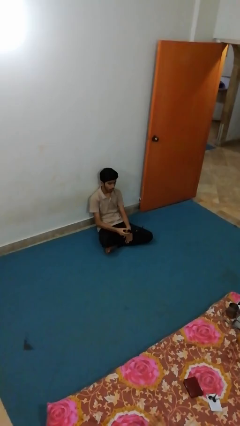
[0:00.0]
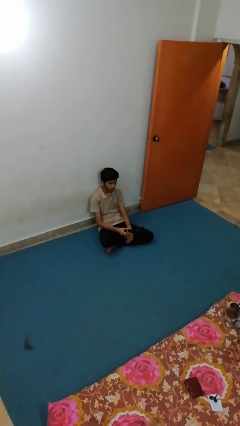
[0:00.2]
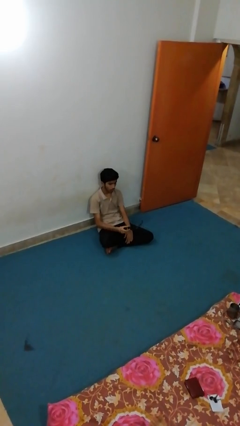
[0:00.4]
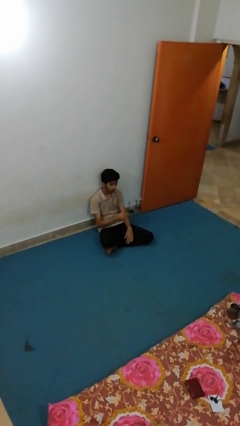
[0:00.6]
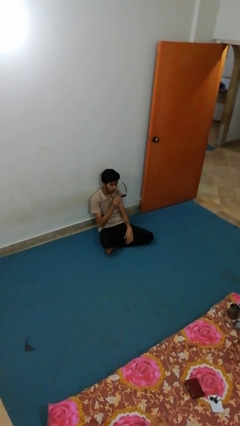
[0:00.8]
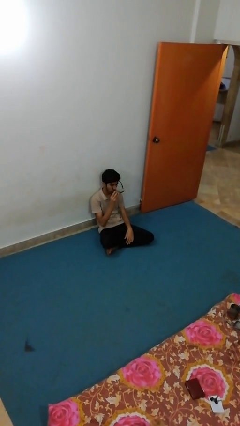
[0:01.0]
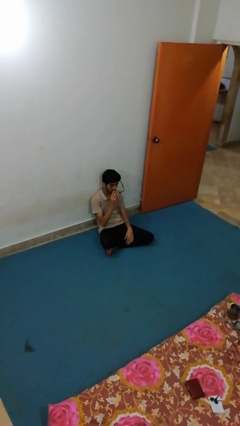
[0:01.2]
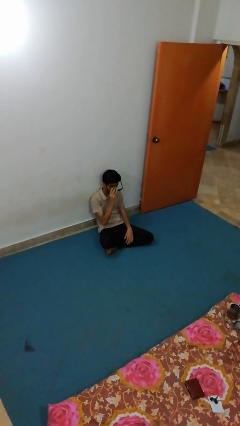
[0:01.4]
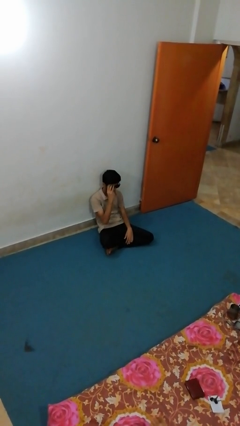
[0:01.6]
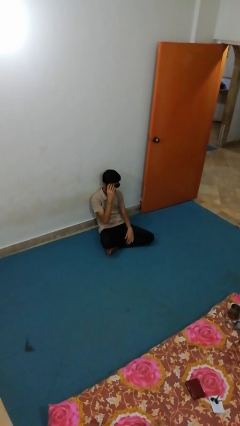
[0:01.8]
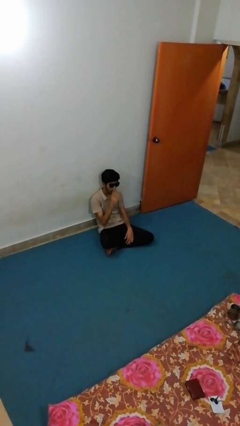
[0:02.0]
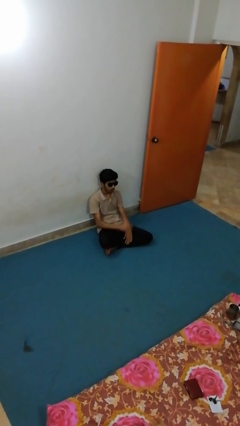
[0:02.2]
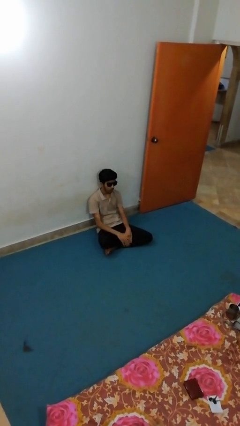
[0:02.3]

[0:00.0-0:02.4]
person puts on sunglasses

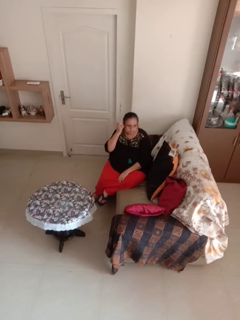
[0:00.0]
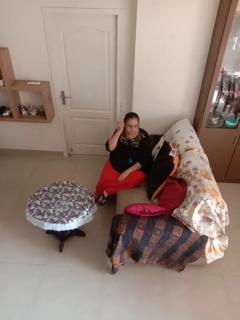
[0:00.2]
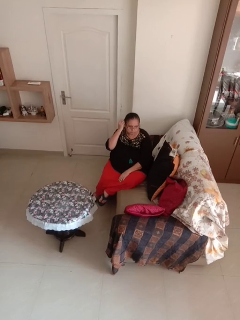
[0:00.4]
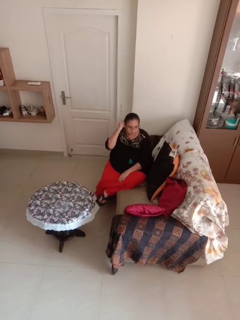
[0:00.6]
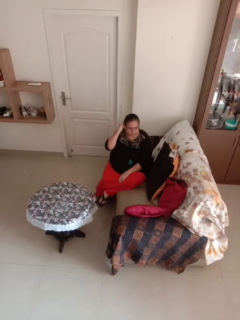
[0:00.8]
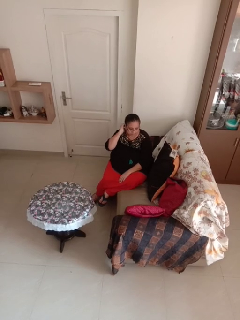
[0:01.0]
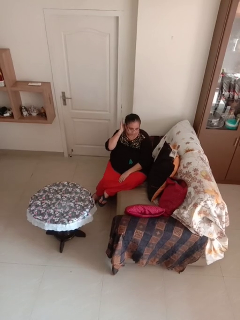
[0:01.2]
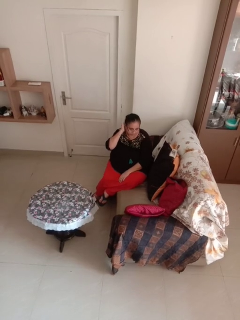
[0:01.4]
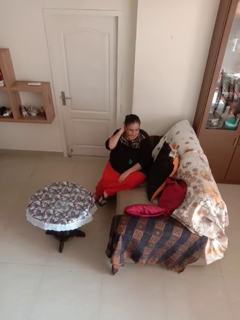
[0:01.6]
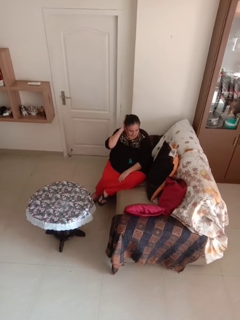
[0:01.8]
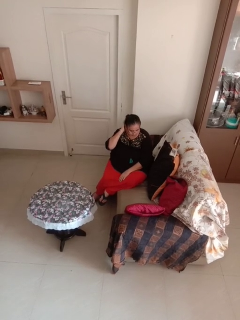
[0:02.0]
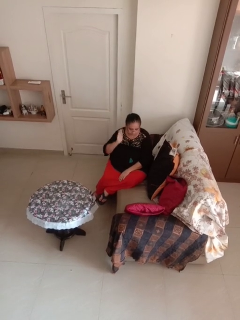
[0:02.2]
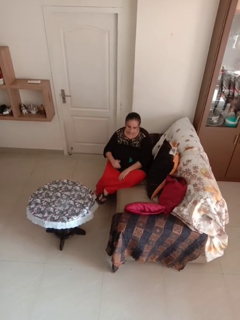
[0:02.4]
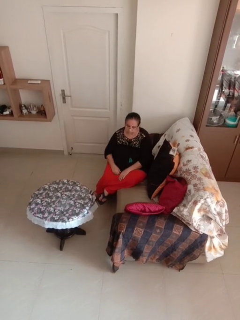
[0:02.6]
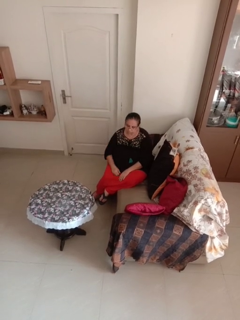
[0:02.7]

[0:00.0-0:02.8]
person strokes hair

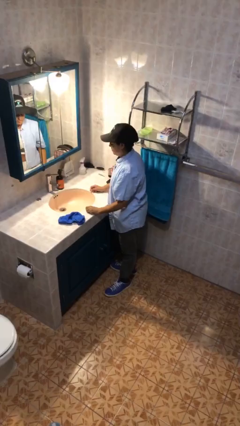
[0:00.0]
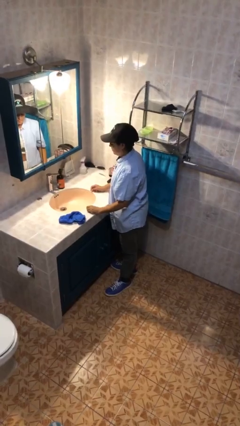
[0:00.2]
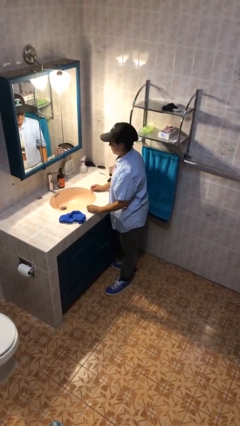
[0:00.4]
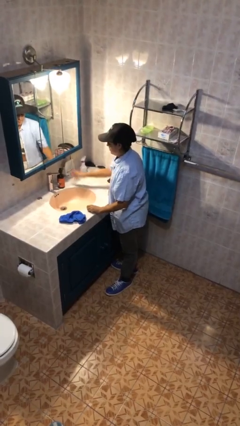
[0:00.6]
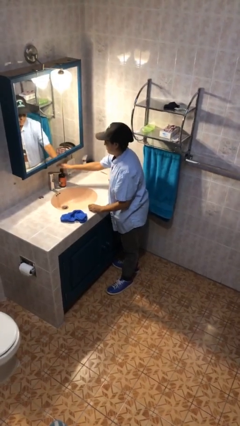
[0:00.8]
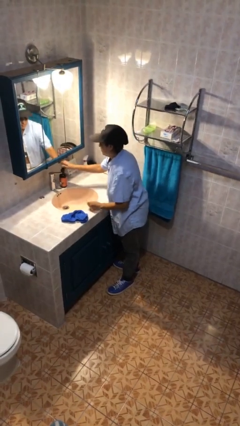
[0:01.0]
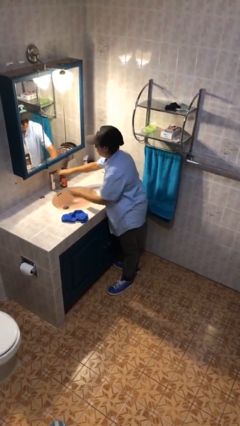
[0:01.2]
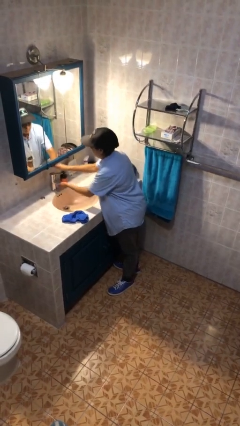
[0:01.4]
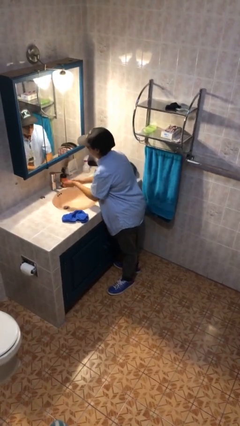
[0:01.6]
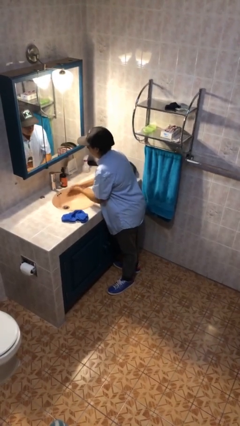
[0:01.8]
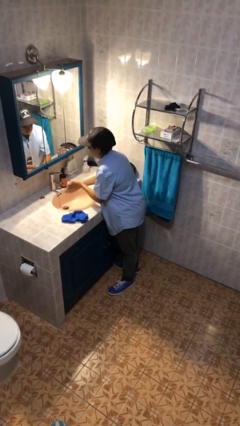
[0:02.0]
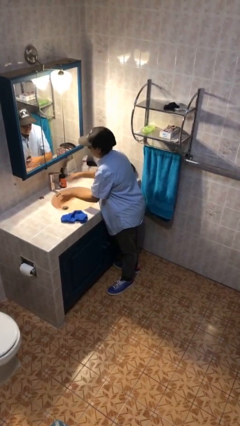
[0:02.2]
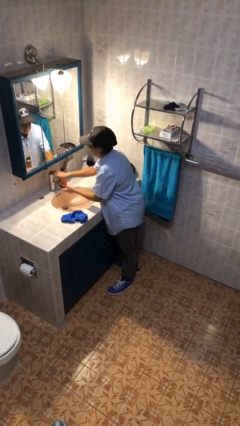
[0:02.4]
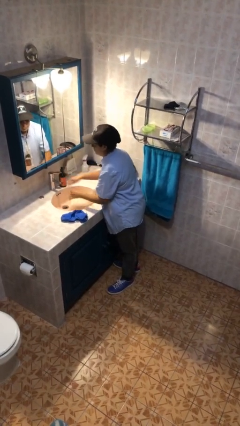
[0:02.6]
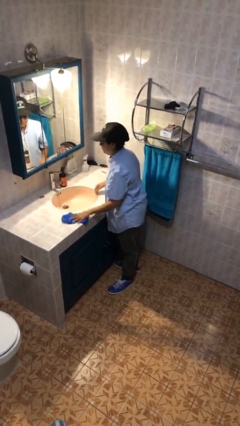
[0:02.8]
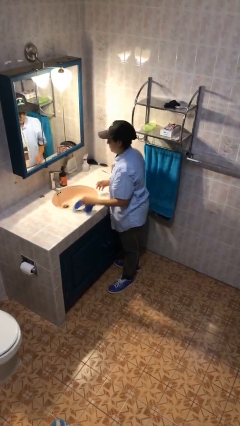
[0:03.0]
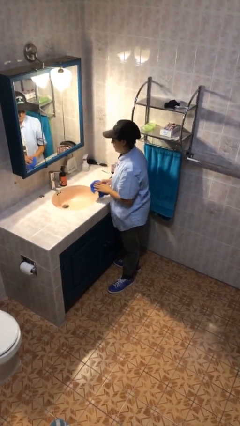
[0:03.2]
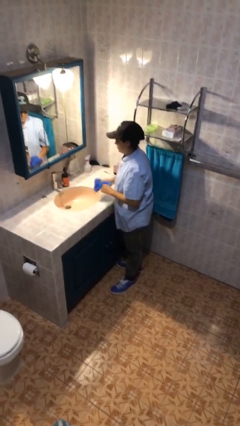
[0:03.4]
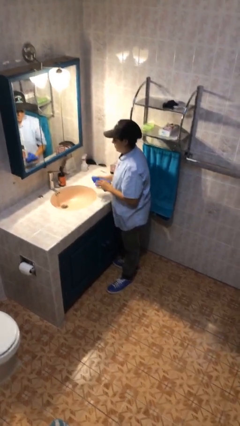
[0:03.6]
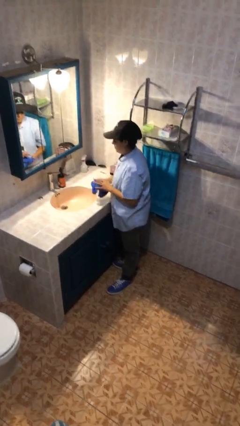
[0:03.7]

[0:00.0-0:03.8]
person washes hands

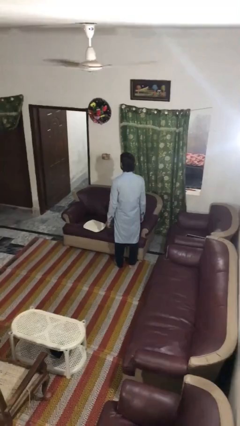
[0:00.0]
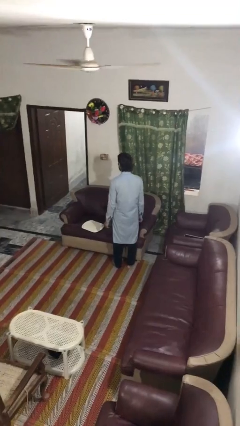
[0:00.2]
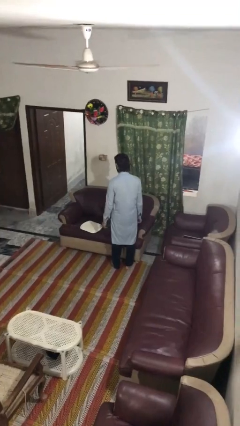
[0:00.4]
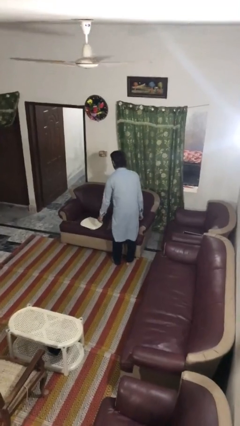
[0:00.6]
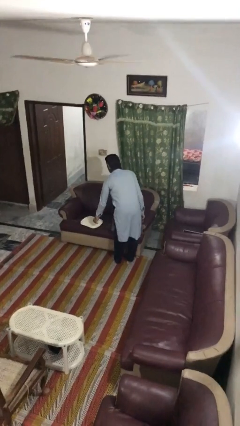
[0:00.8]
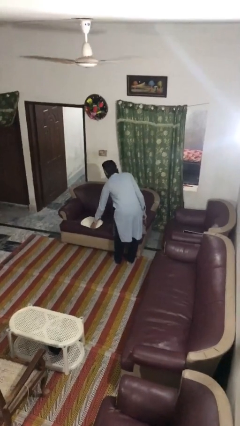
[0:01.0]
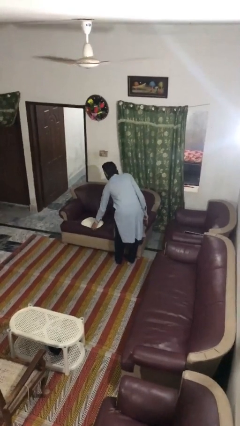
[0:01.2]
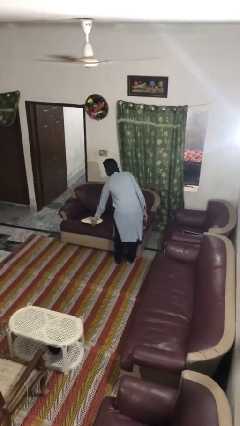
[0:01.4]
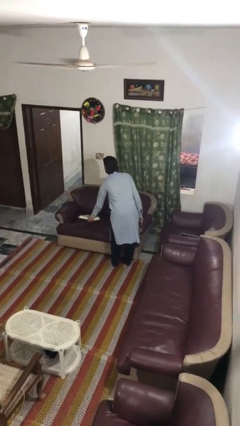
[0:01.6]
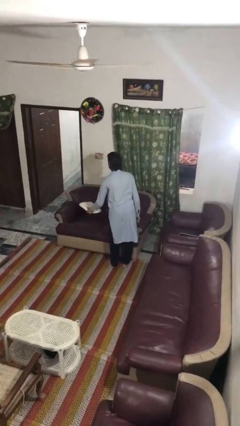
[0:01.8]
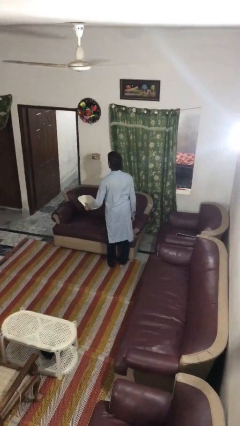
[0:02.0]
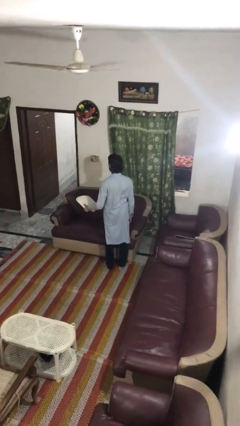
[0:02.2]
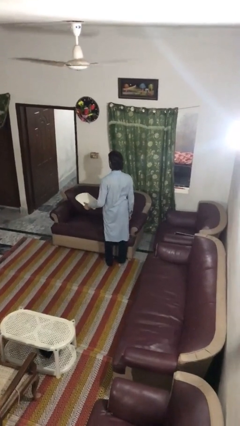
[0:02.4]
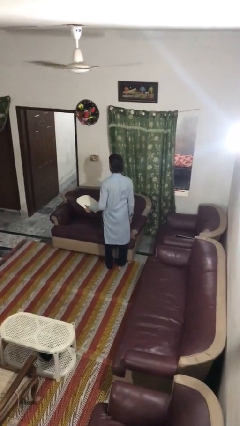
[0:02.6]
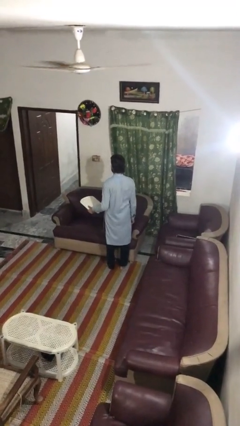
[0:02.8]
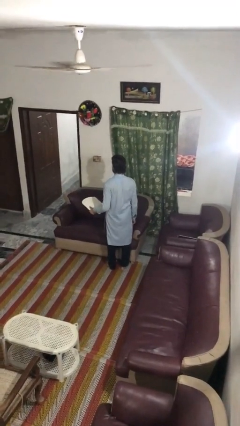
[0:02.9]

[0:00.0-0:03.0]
person picks up object from couch

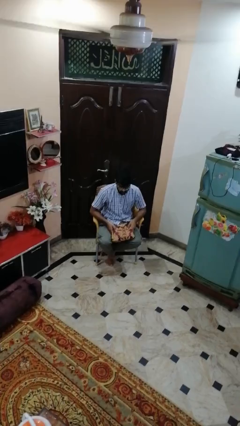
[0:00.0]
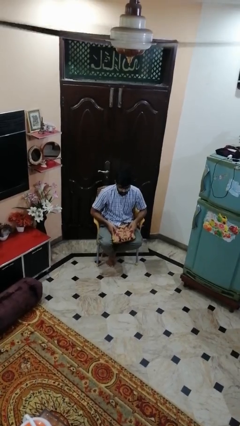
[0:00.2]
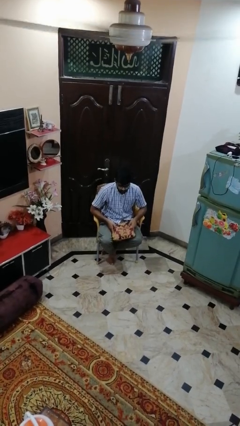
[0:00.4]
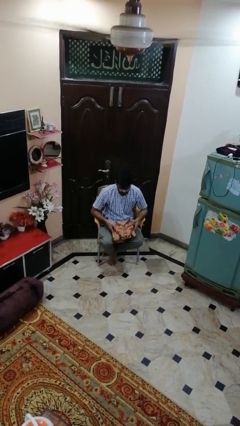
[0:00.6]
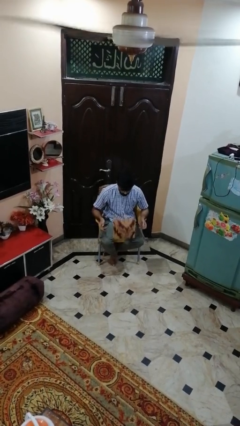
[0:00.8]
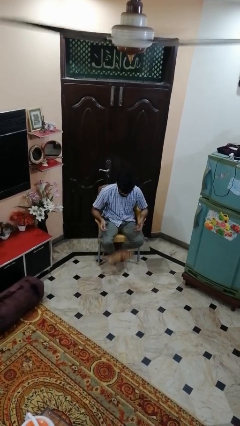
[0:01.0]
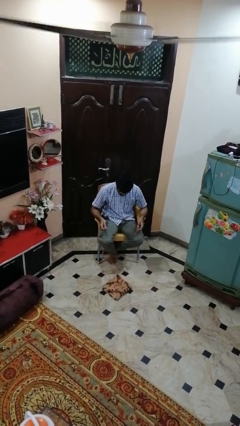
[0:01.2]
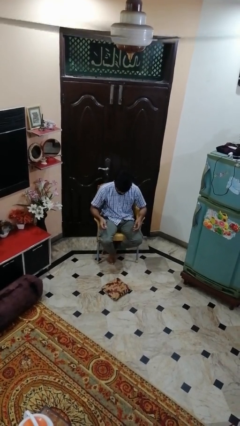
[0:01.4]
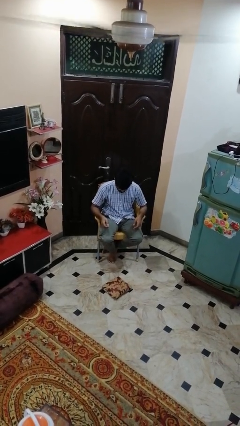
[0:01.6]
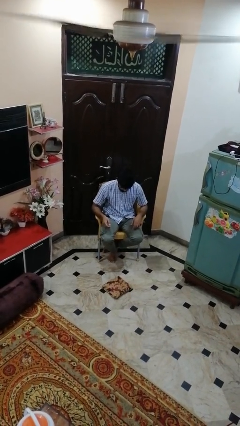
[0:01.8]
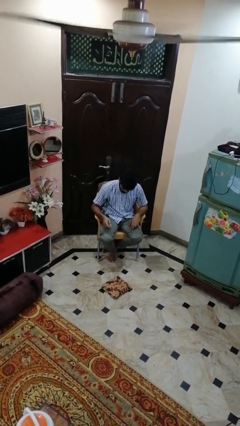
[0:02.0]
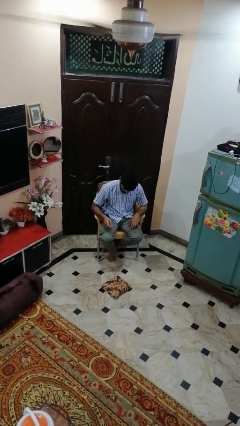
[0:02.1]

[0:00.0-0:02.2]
person drops object

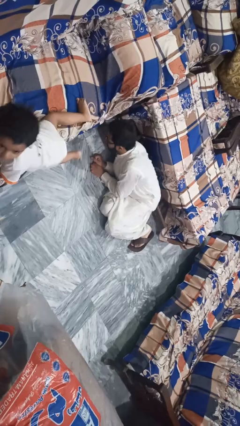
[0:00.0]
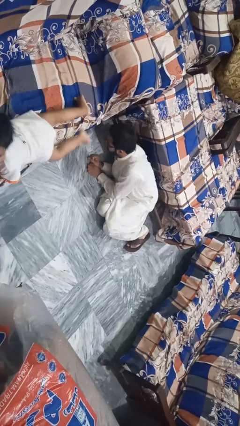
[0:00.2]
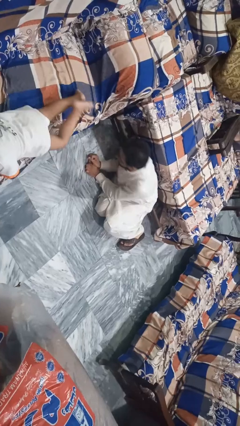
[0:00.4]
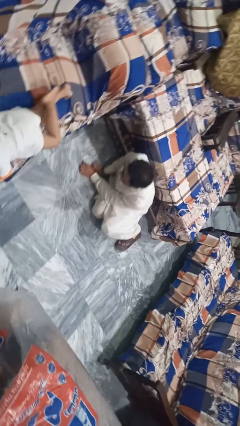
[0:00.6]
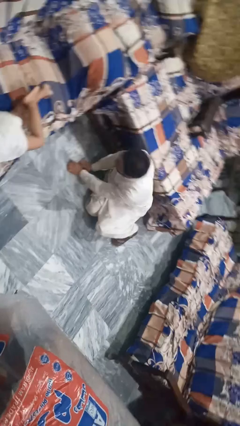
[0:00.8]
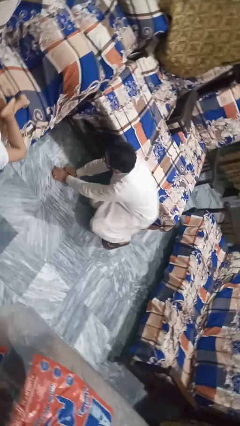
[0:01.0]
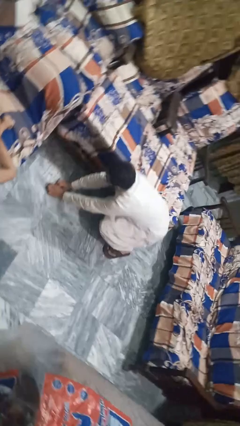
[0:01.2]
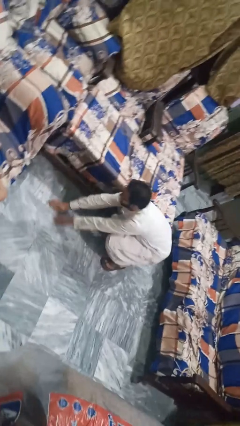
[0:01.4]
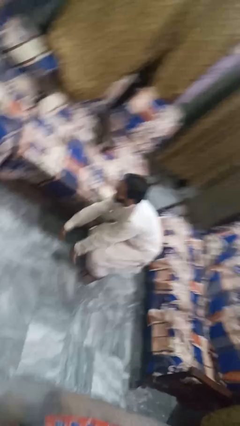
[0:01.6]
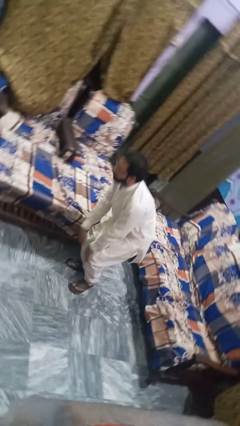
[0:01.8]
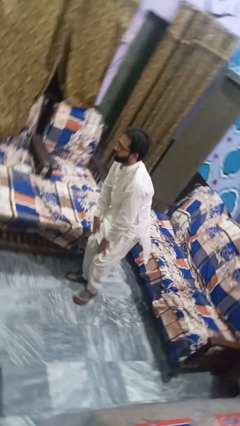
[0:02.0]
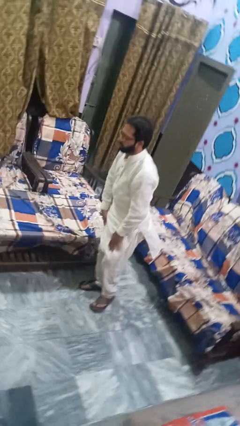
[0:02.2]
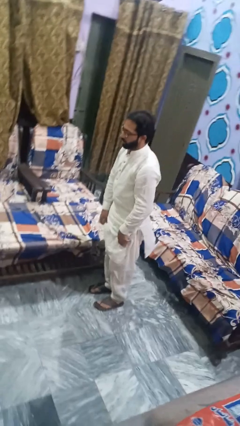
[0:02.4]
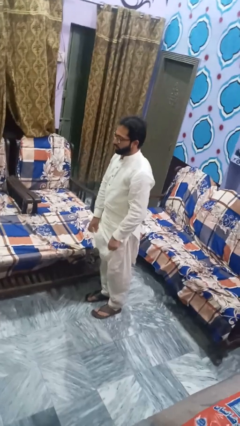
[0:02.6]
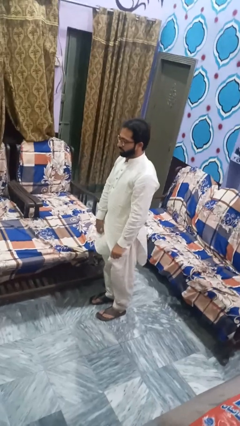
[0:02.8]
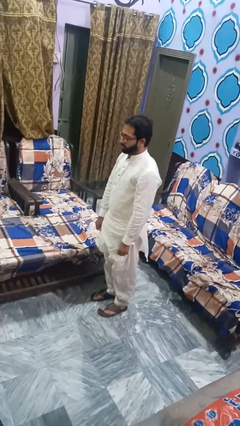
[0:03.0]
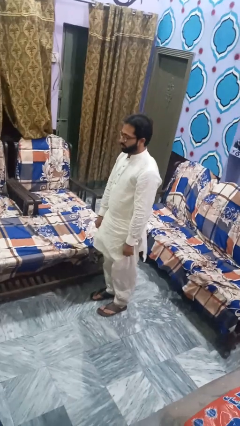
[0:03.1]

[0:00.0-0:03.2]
person stands up from floor

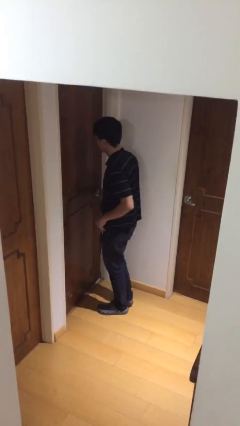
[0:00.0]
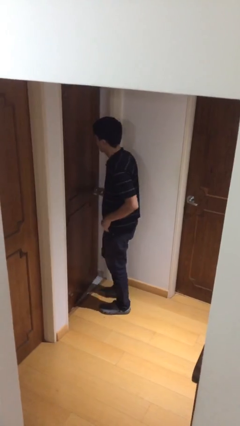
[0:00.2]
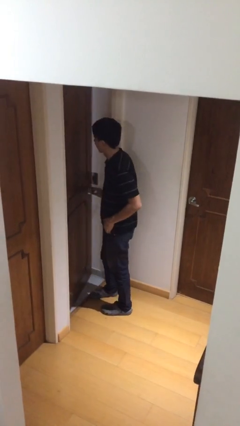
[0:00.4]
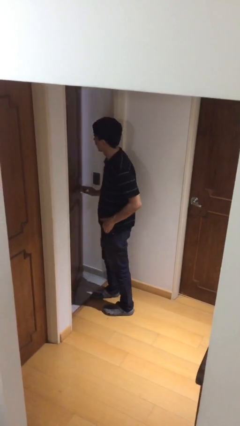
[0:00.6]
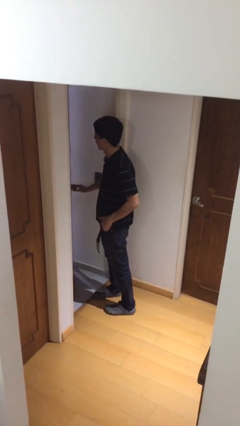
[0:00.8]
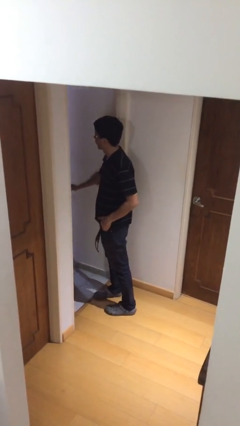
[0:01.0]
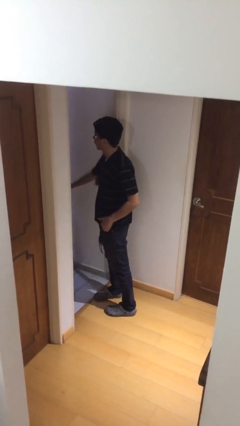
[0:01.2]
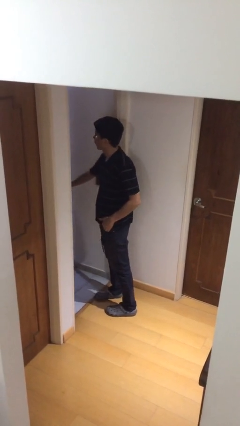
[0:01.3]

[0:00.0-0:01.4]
person opens facility door
